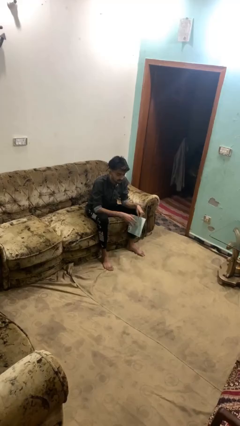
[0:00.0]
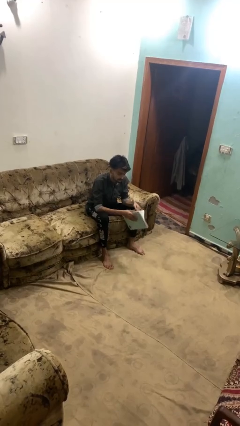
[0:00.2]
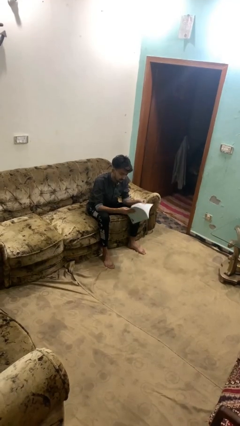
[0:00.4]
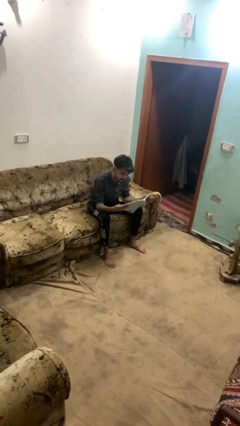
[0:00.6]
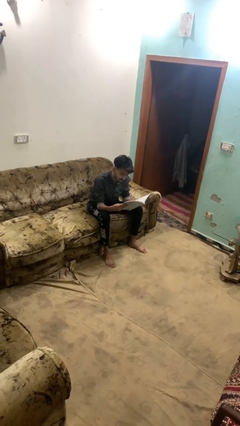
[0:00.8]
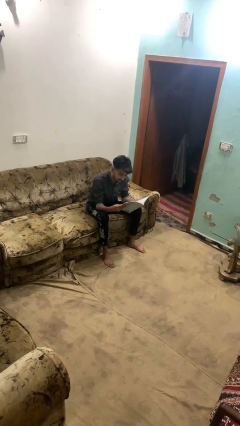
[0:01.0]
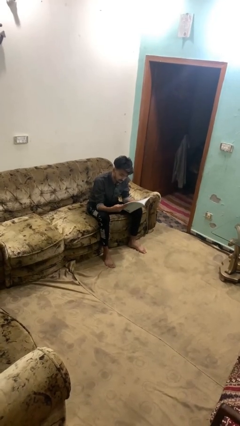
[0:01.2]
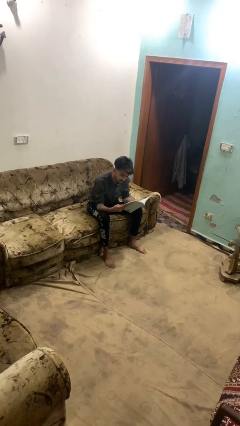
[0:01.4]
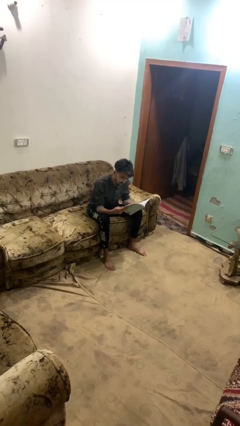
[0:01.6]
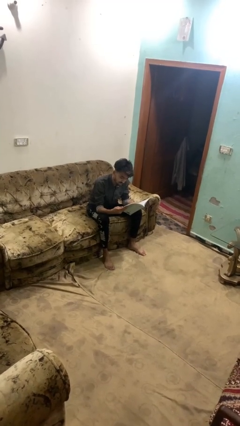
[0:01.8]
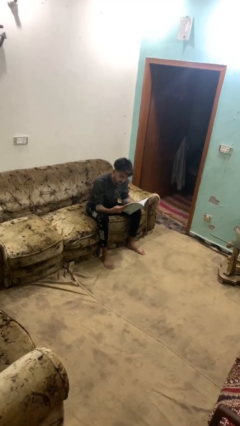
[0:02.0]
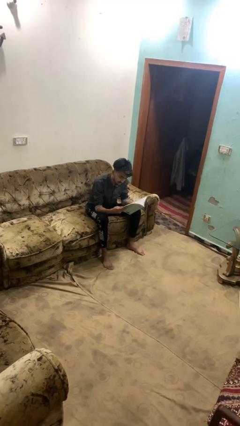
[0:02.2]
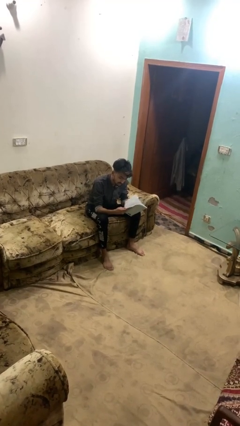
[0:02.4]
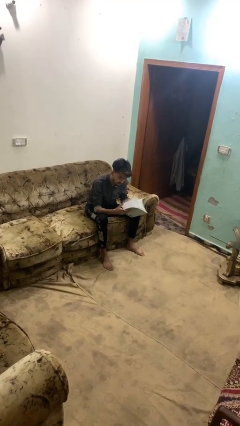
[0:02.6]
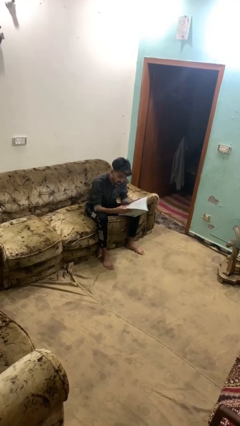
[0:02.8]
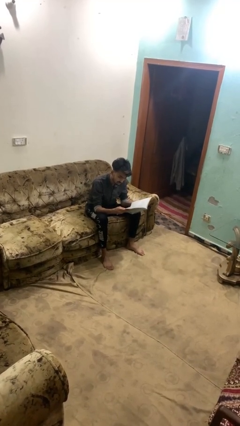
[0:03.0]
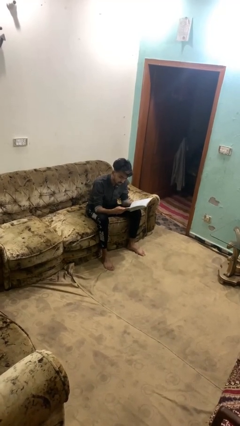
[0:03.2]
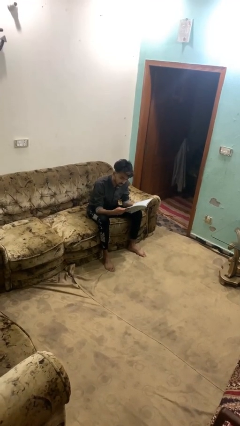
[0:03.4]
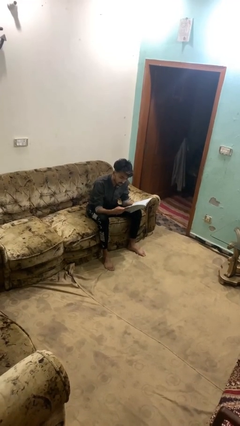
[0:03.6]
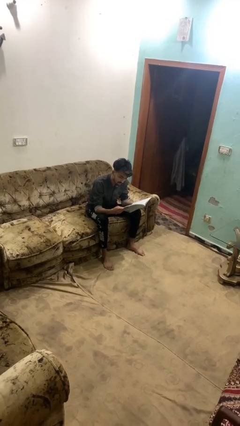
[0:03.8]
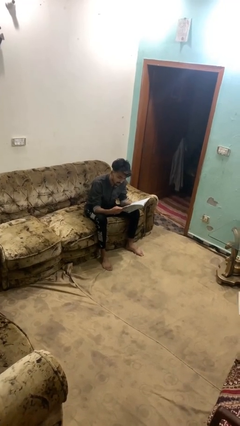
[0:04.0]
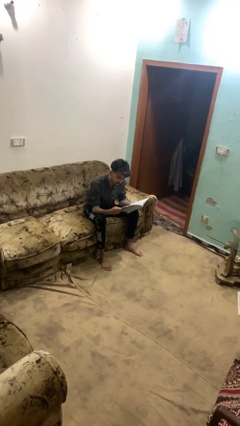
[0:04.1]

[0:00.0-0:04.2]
person reads magazine

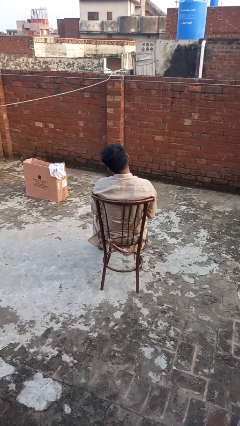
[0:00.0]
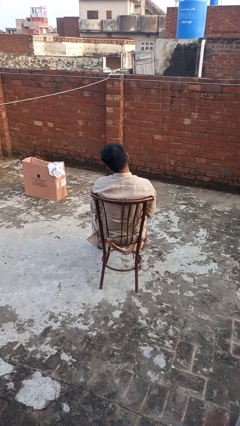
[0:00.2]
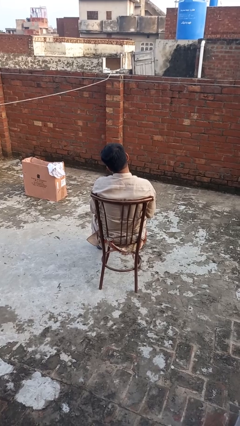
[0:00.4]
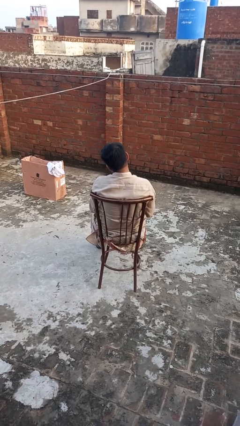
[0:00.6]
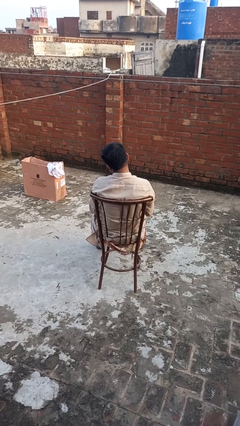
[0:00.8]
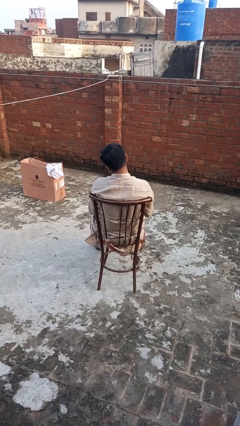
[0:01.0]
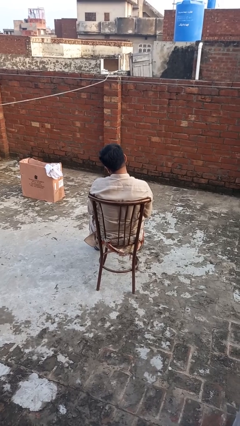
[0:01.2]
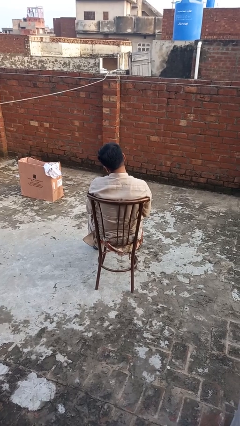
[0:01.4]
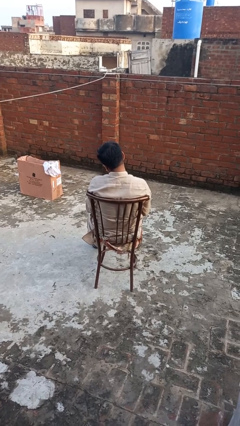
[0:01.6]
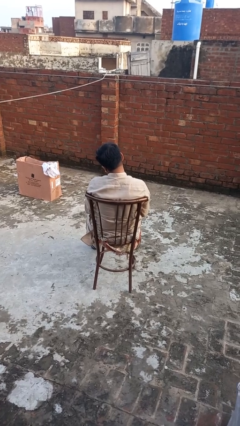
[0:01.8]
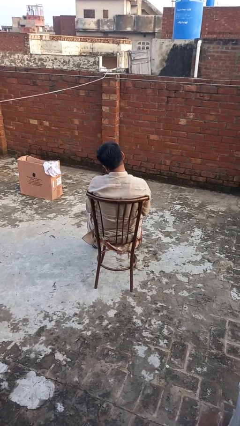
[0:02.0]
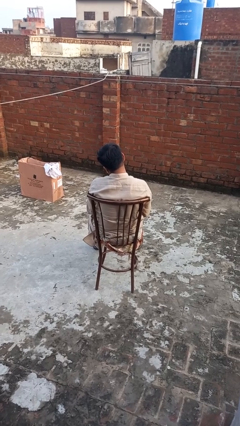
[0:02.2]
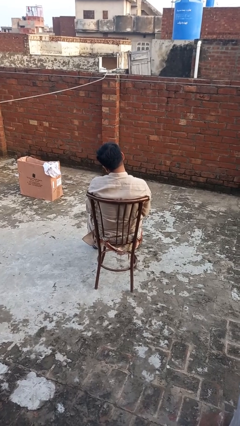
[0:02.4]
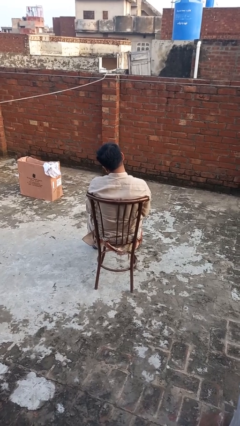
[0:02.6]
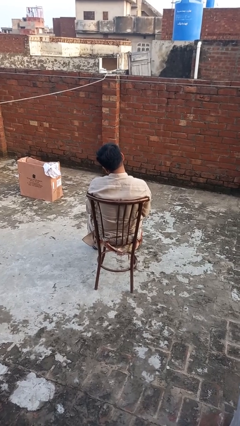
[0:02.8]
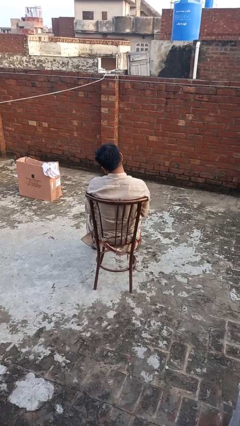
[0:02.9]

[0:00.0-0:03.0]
person stirs mug

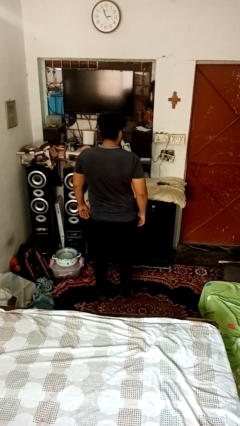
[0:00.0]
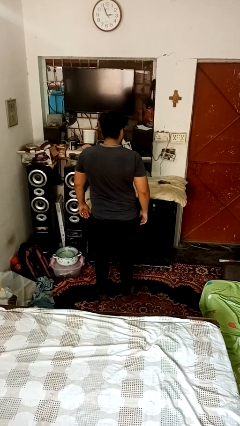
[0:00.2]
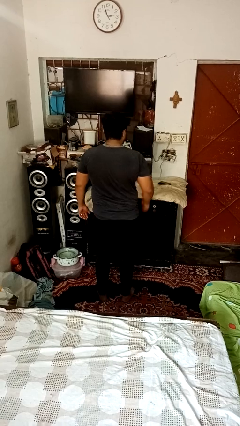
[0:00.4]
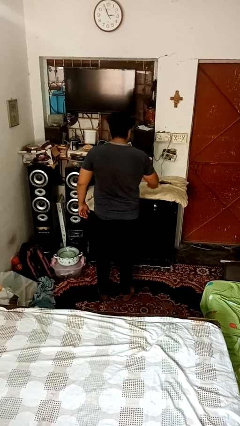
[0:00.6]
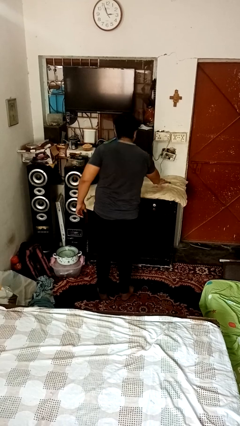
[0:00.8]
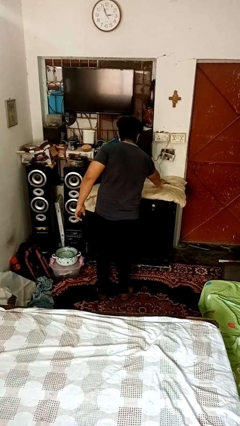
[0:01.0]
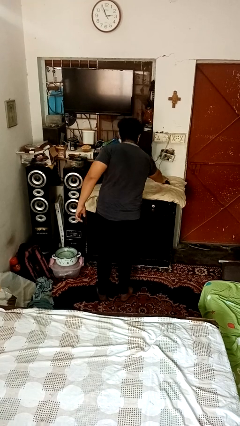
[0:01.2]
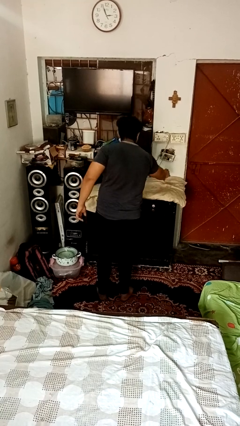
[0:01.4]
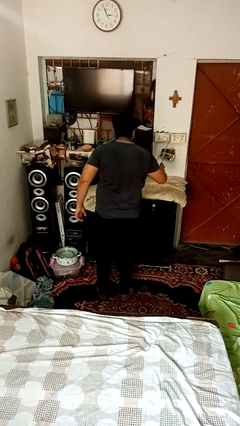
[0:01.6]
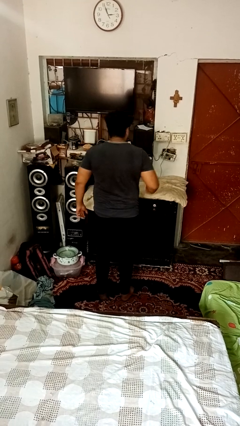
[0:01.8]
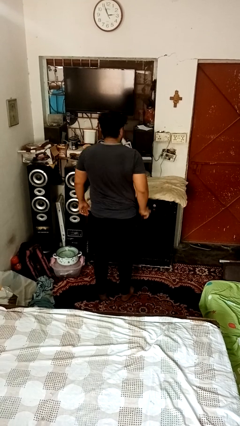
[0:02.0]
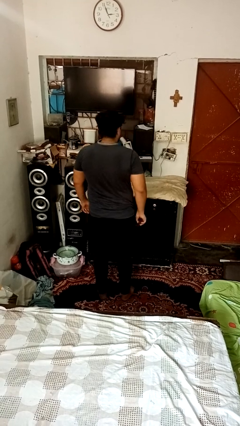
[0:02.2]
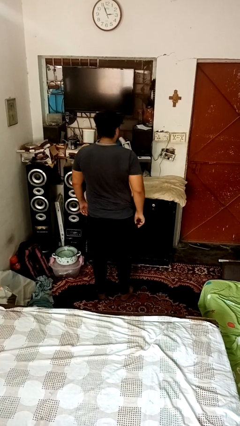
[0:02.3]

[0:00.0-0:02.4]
person picks up object from table

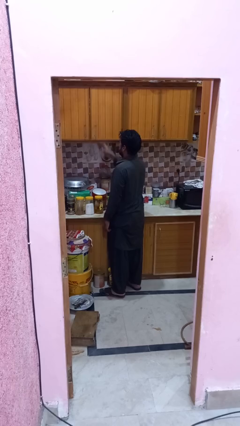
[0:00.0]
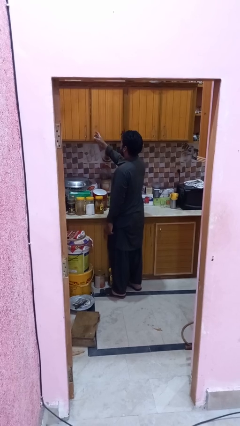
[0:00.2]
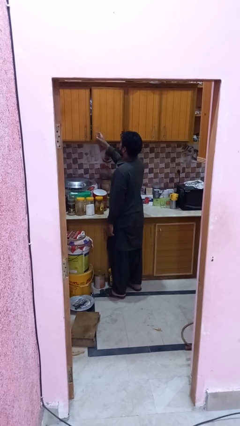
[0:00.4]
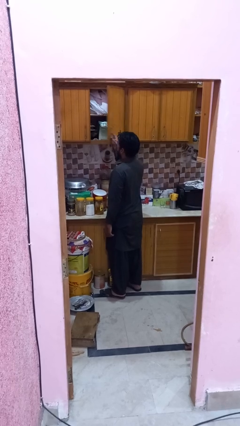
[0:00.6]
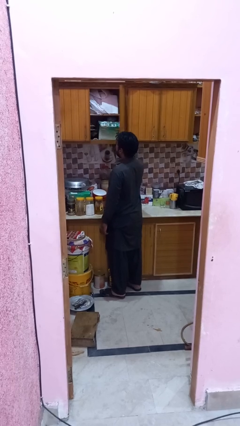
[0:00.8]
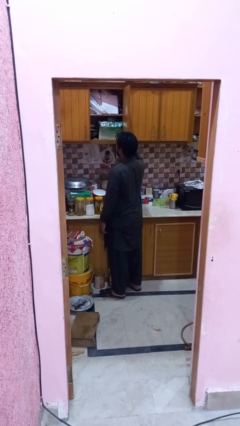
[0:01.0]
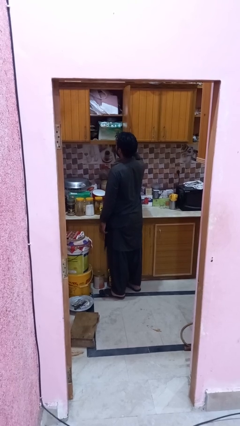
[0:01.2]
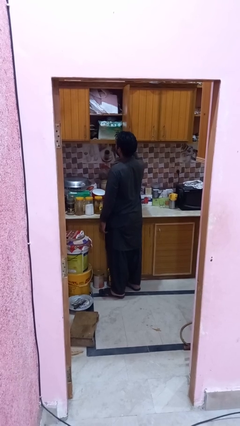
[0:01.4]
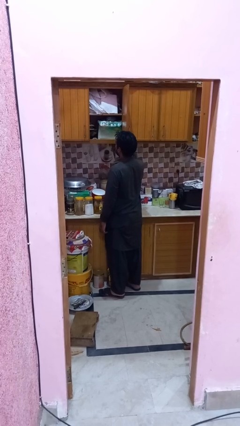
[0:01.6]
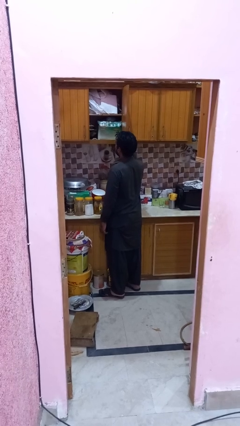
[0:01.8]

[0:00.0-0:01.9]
person opens cabinet

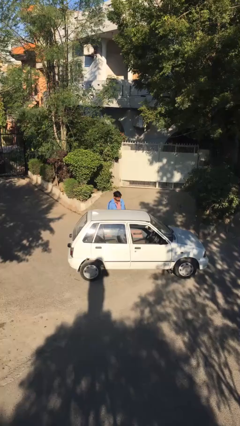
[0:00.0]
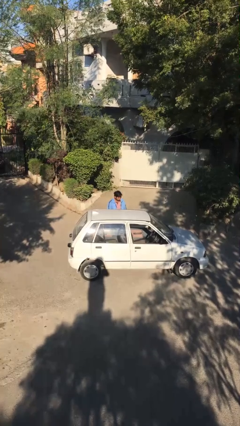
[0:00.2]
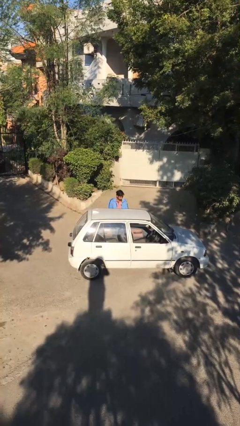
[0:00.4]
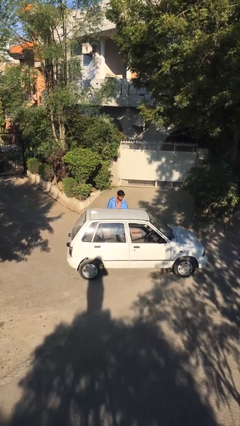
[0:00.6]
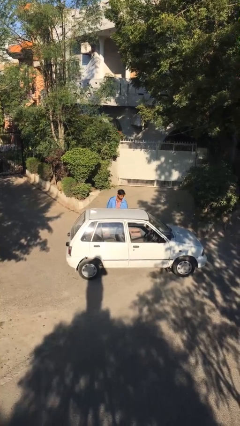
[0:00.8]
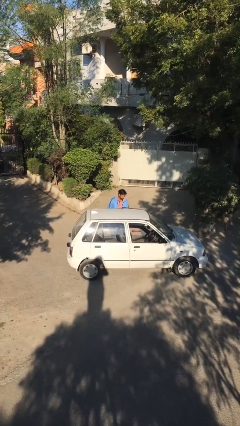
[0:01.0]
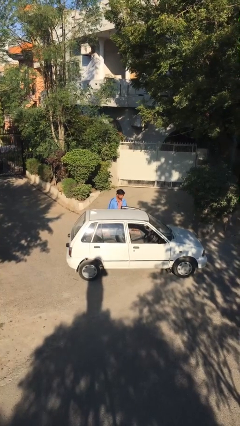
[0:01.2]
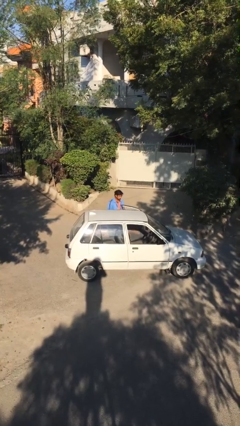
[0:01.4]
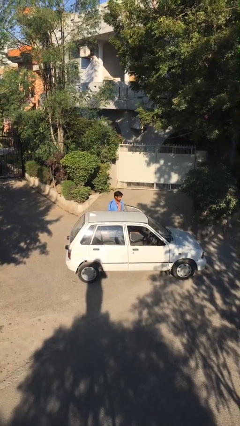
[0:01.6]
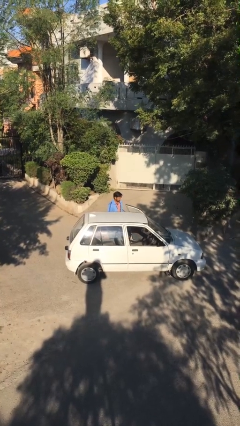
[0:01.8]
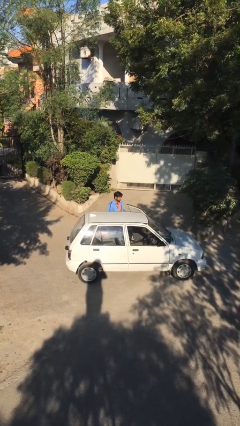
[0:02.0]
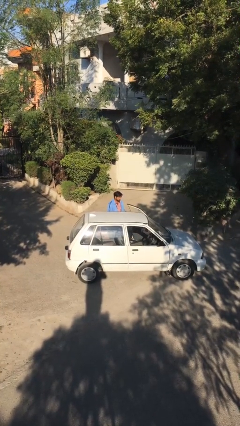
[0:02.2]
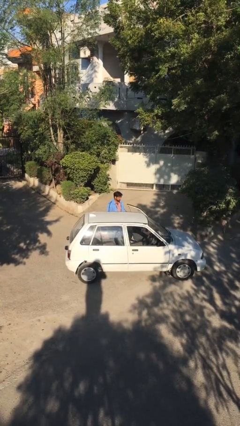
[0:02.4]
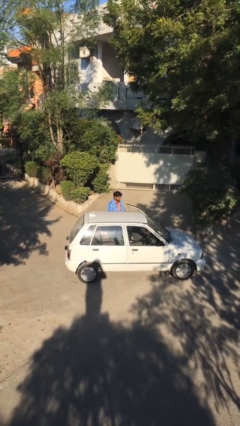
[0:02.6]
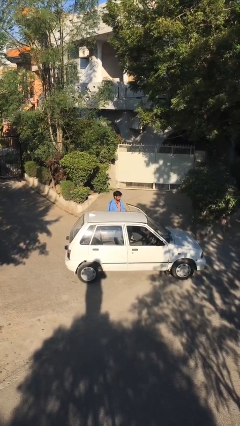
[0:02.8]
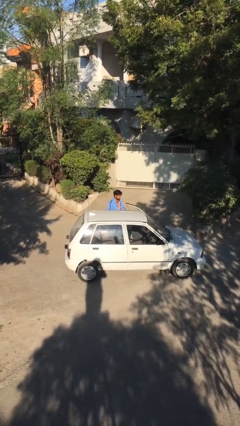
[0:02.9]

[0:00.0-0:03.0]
person opens car door

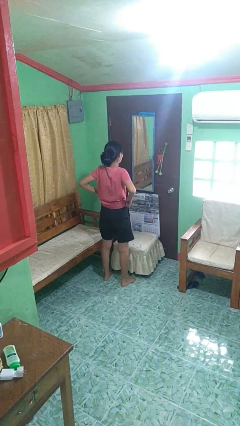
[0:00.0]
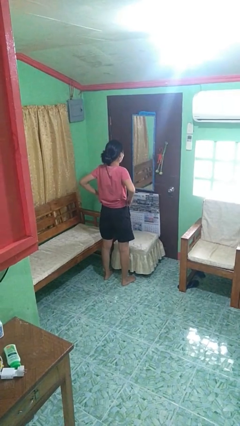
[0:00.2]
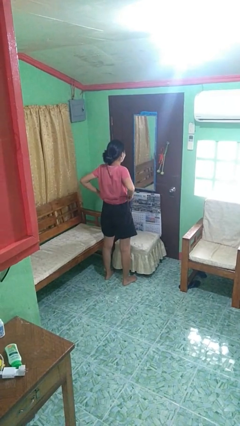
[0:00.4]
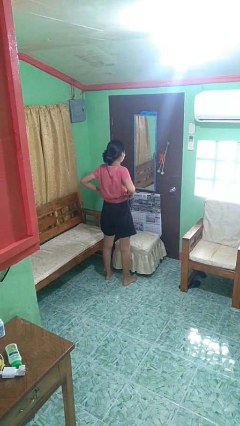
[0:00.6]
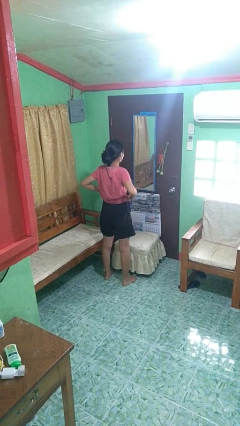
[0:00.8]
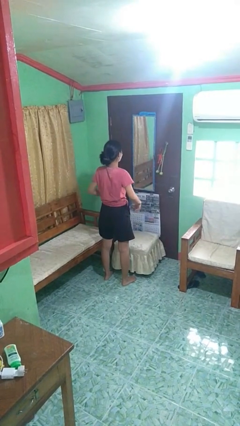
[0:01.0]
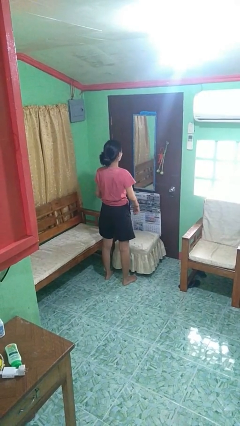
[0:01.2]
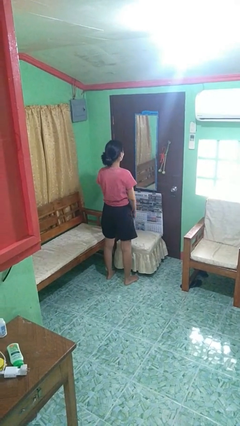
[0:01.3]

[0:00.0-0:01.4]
person hikes up pants

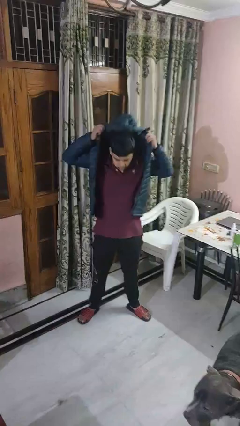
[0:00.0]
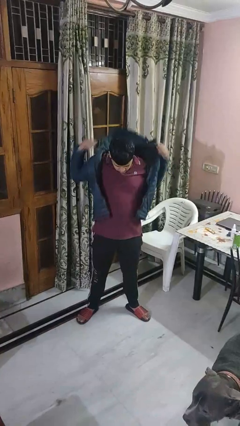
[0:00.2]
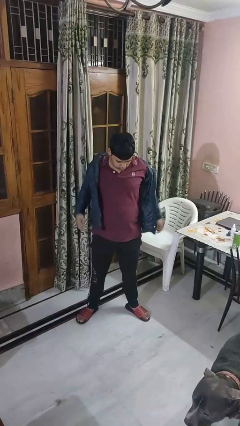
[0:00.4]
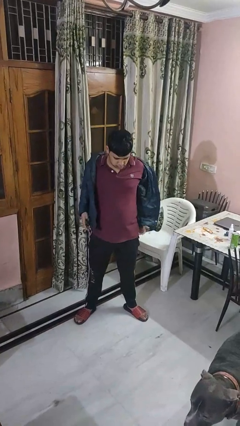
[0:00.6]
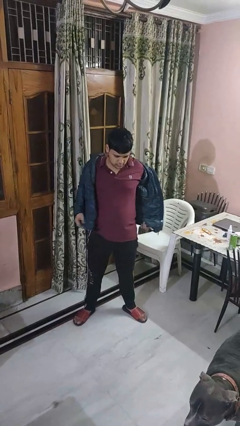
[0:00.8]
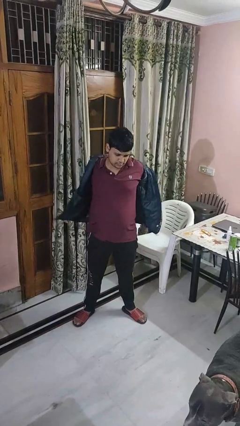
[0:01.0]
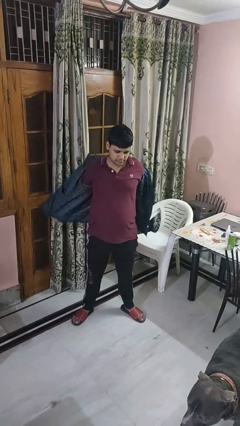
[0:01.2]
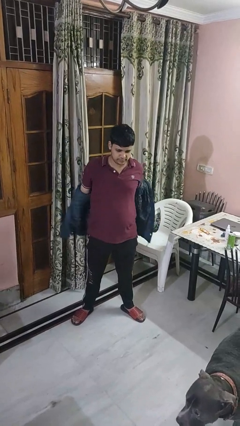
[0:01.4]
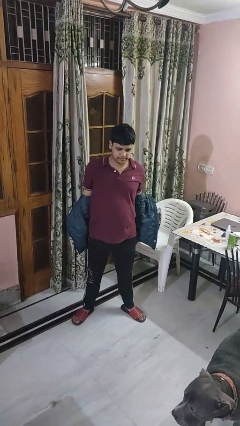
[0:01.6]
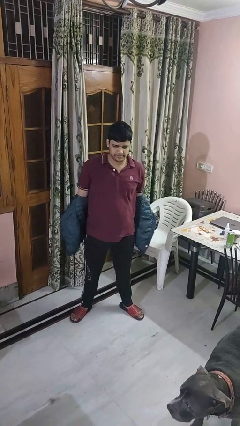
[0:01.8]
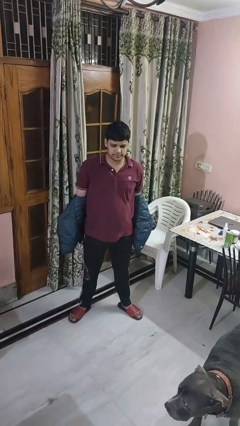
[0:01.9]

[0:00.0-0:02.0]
person takes off hoodie
